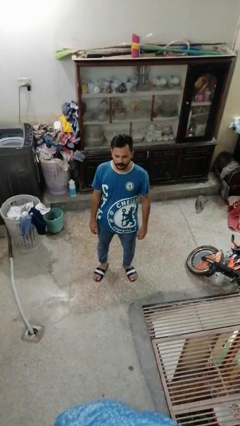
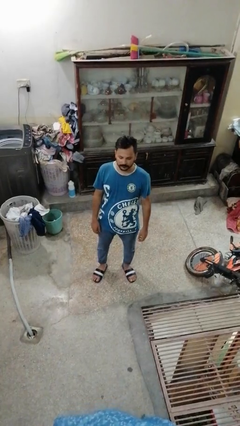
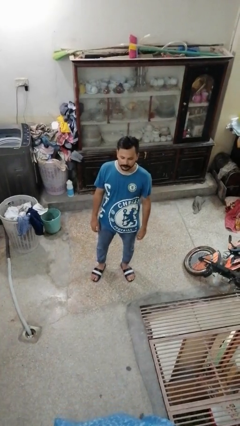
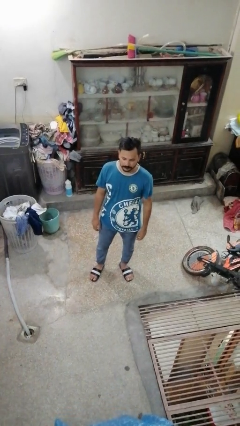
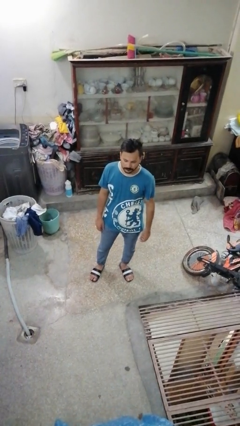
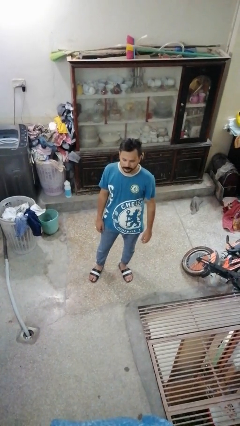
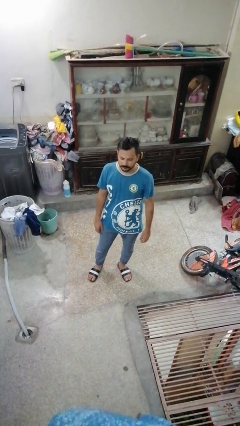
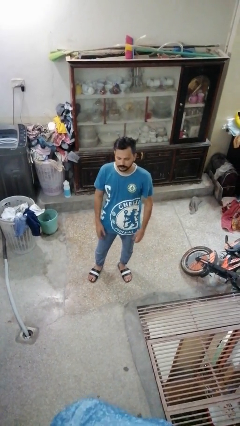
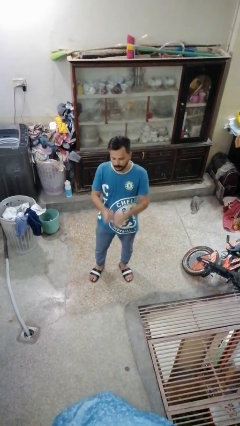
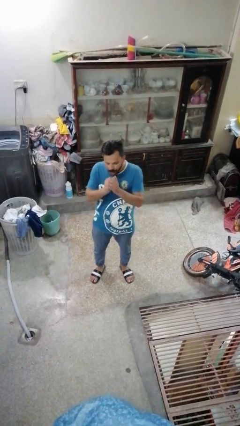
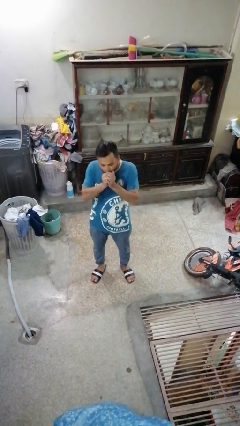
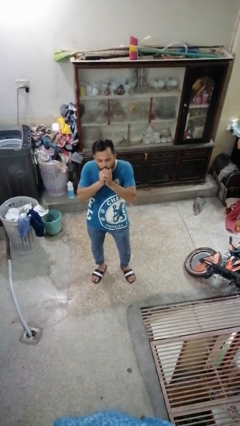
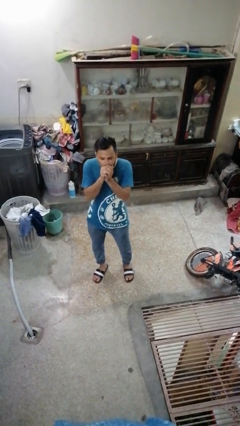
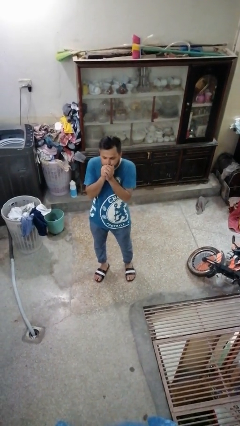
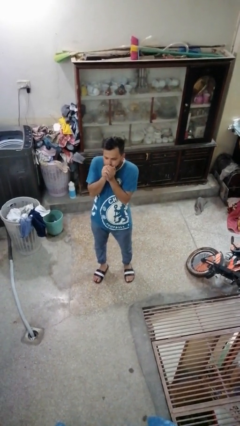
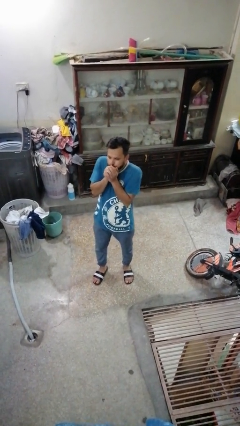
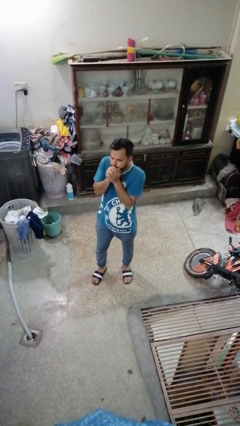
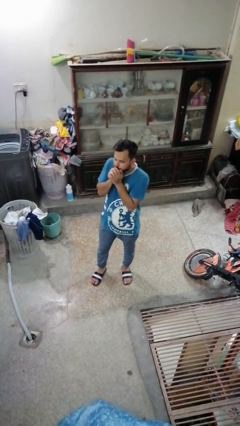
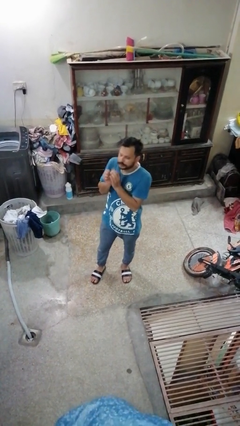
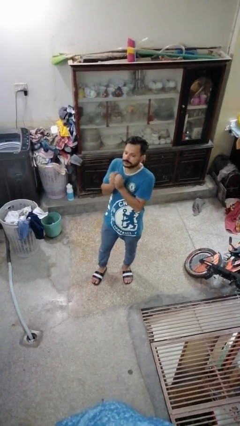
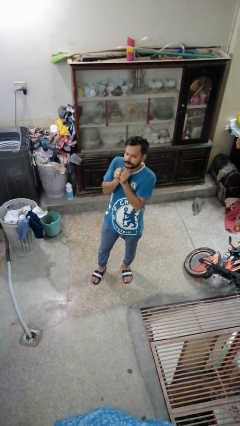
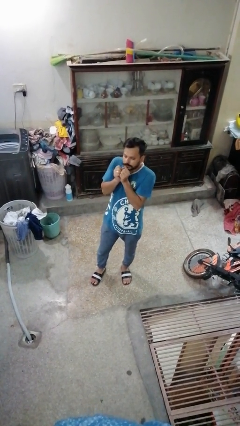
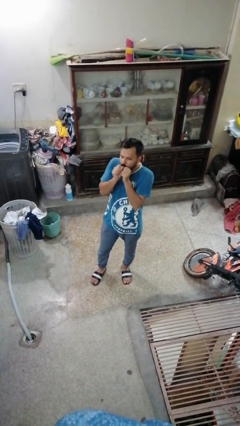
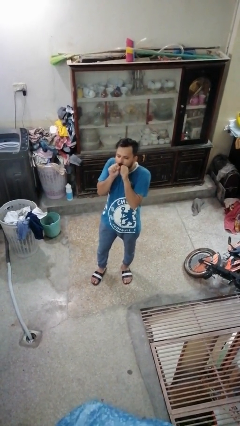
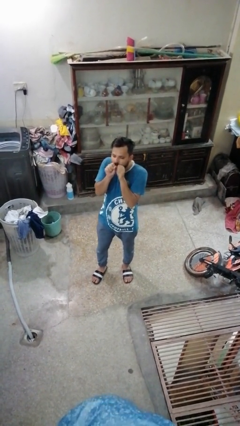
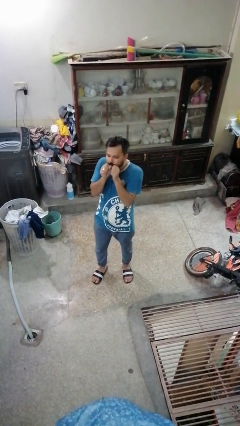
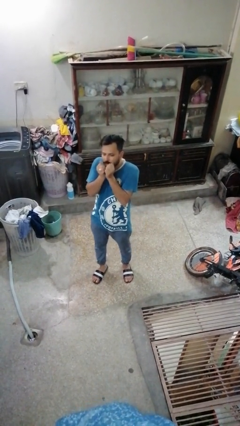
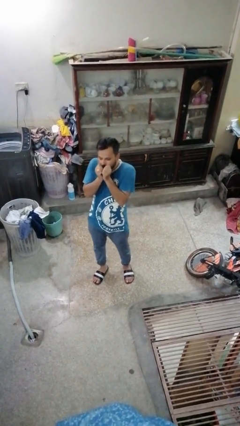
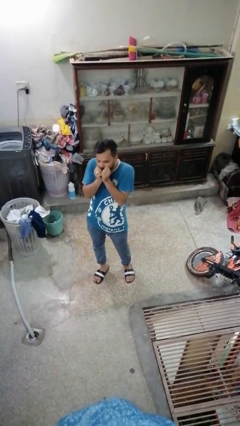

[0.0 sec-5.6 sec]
person blows into hands

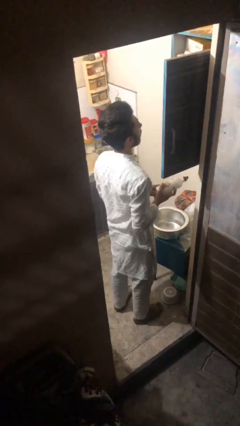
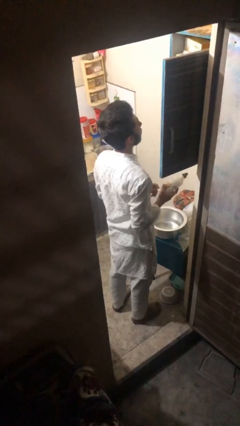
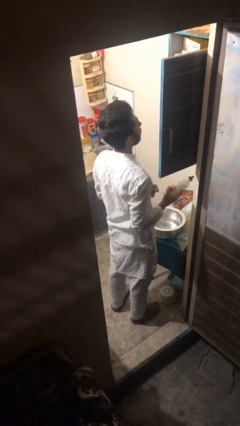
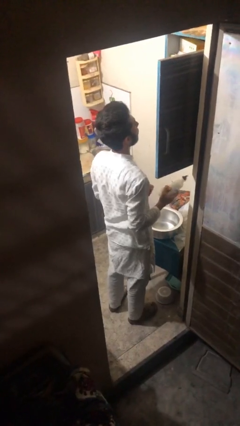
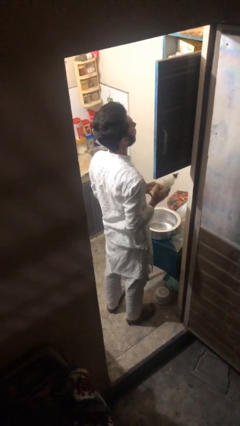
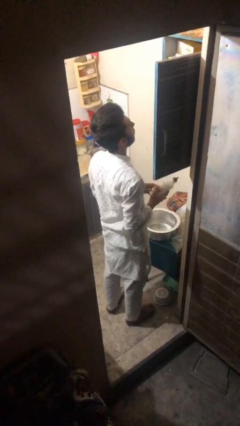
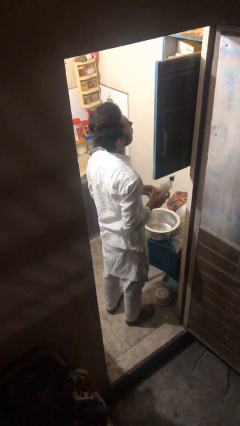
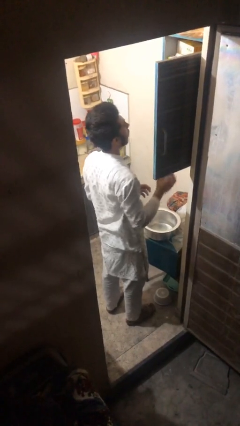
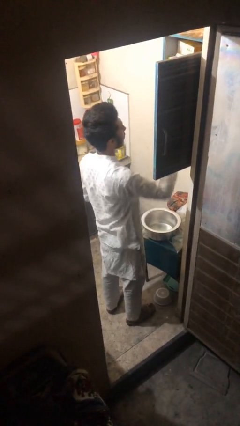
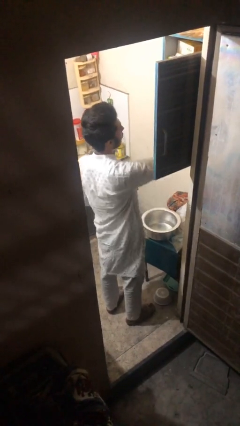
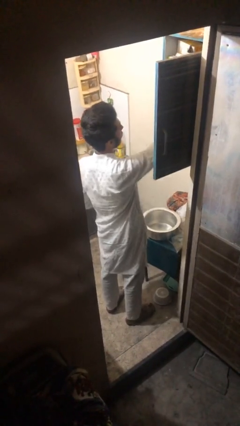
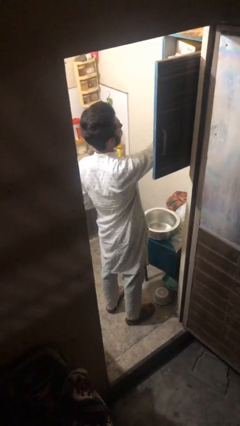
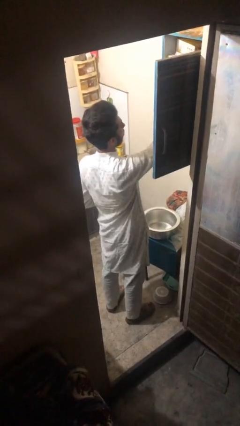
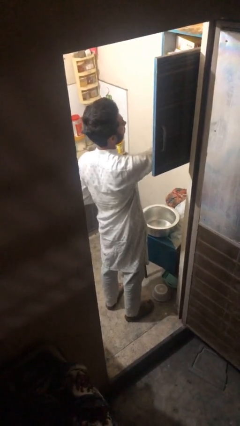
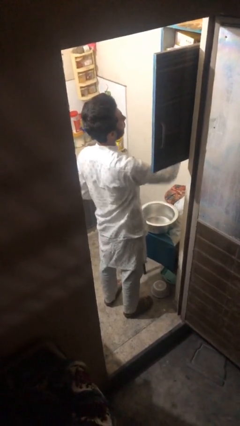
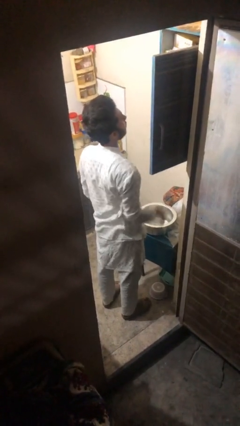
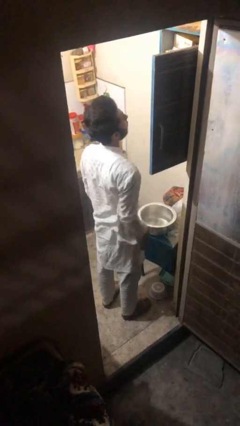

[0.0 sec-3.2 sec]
person puts object in cabinet

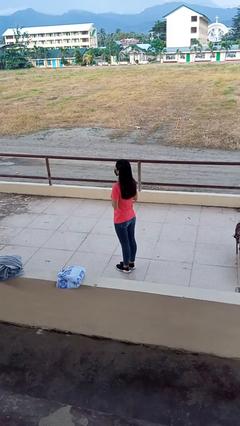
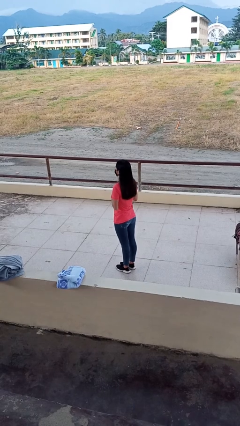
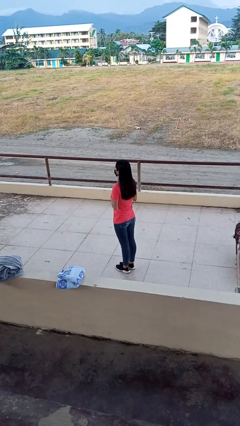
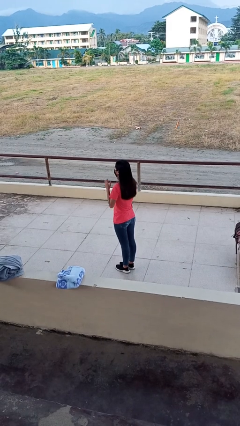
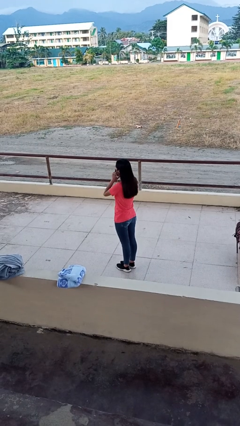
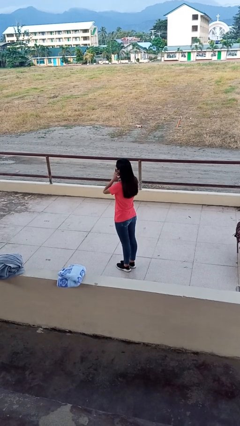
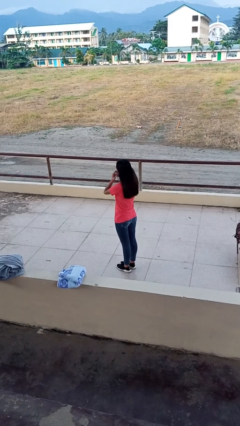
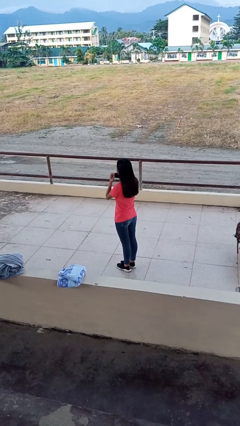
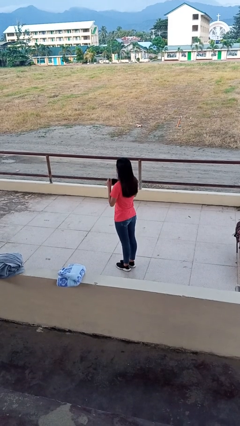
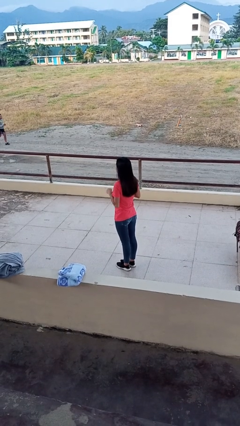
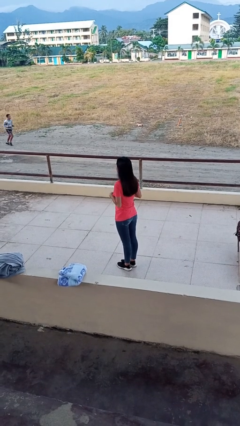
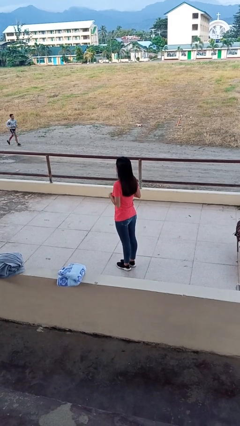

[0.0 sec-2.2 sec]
person takes off facemask

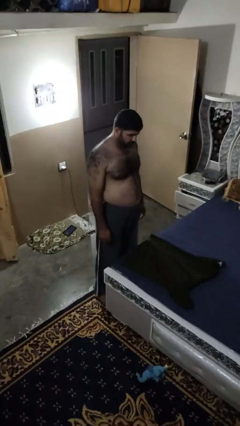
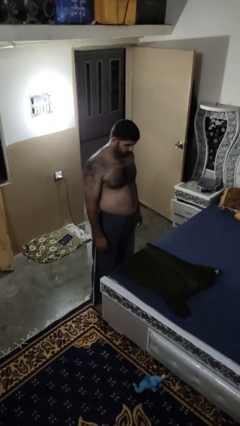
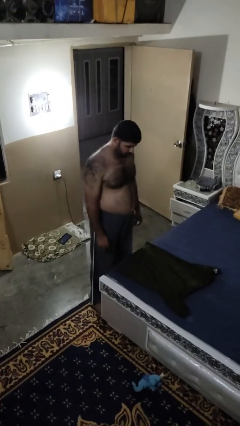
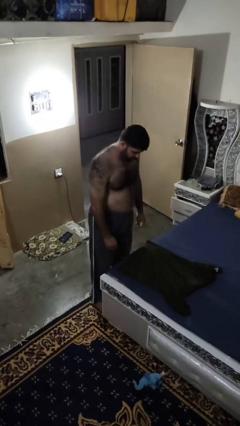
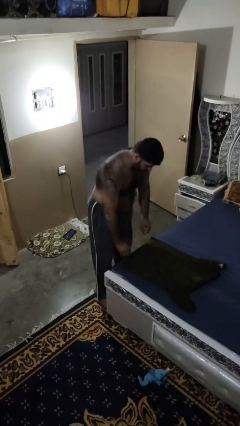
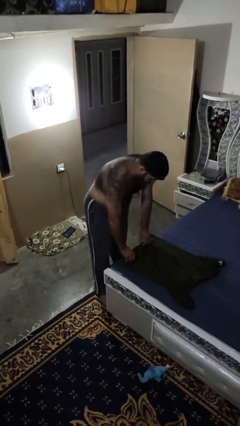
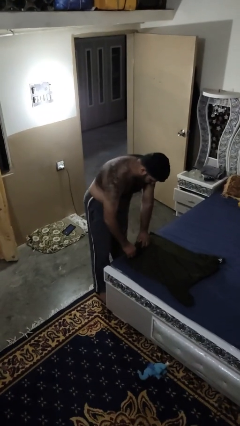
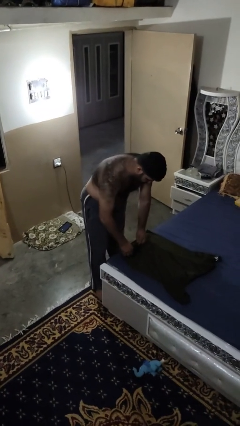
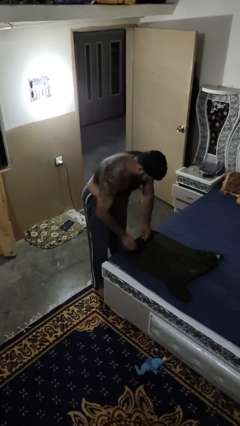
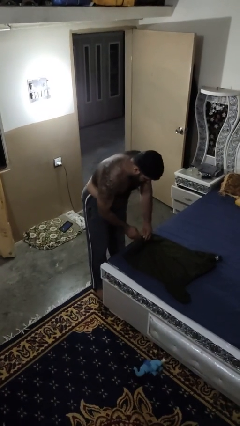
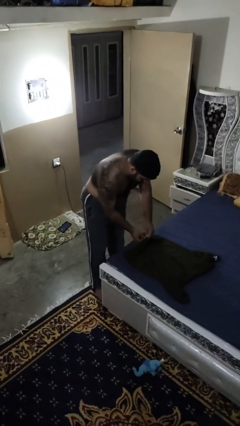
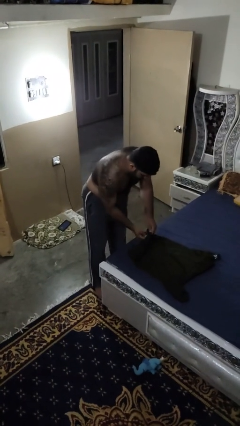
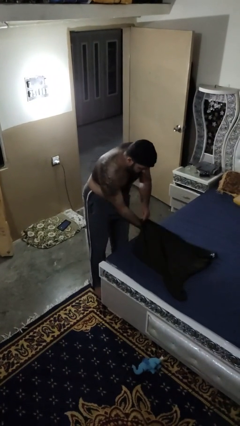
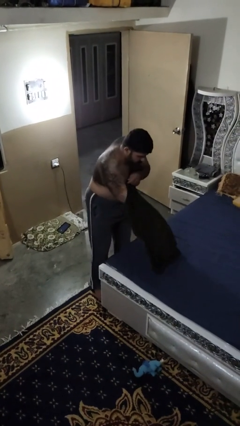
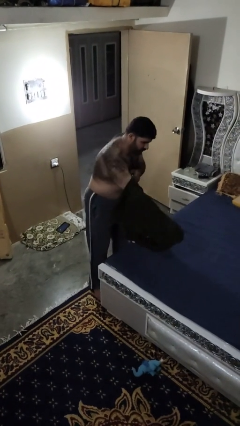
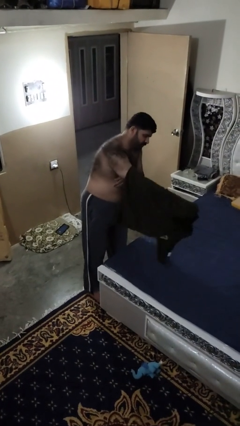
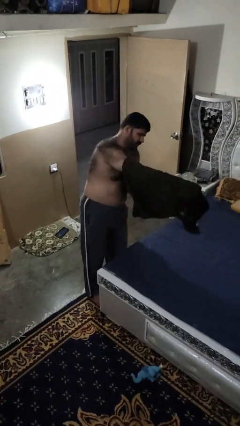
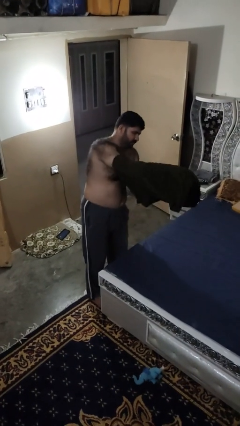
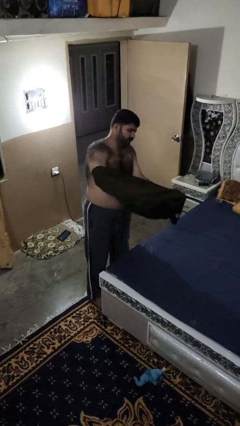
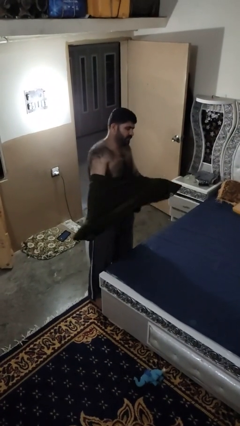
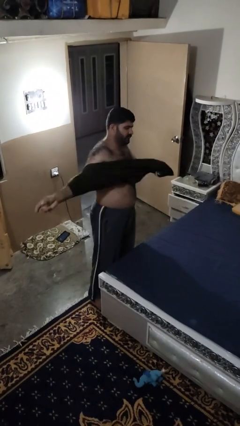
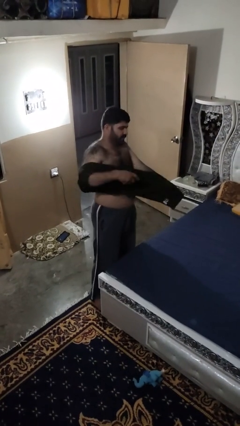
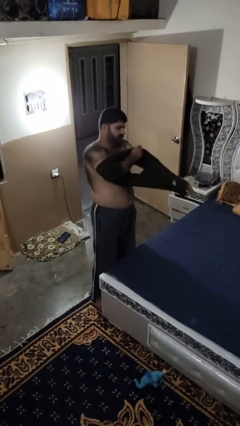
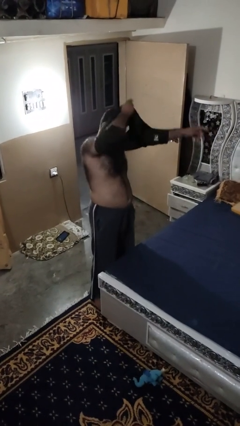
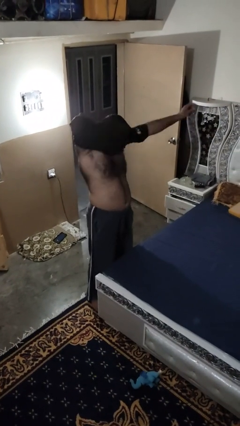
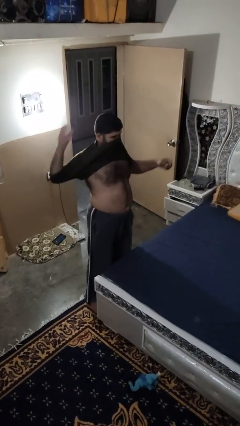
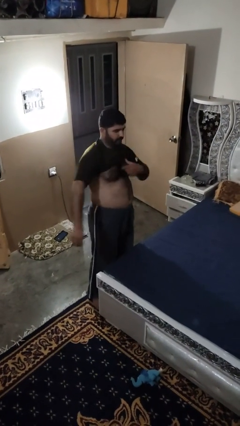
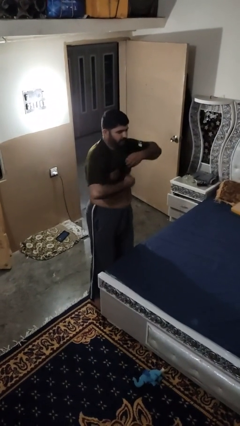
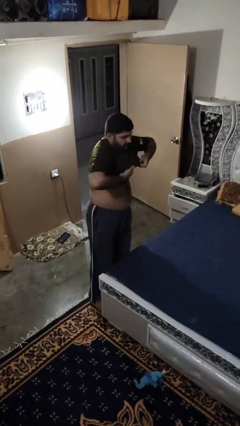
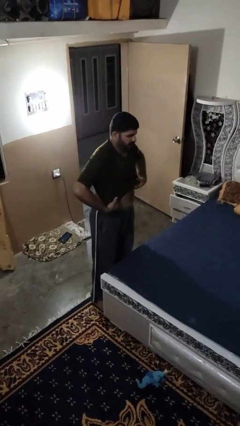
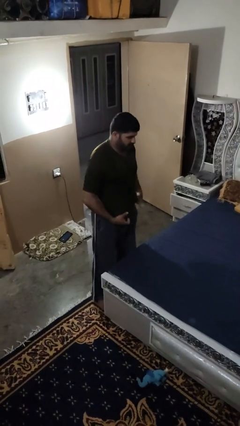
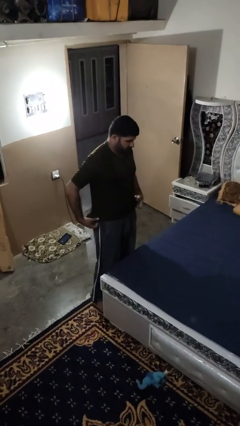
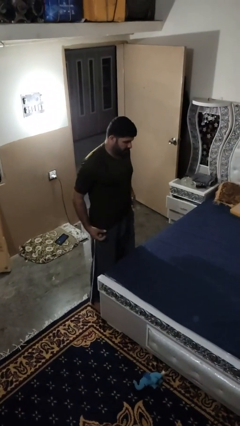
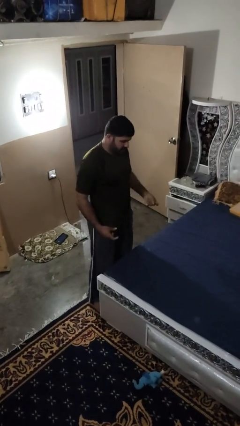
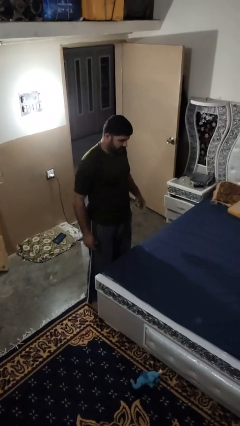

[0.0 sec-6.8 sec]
person puts on shirt
